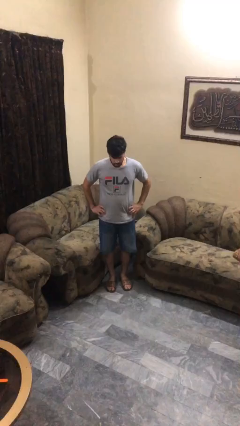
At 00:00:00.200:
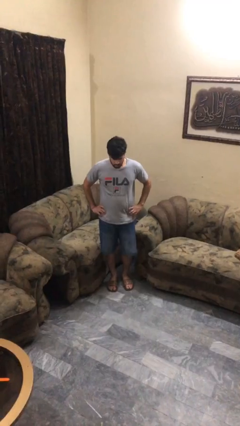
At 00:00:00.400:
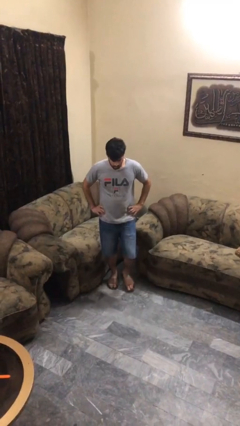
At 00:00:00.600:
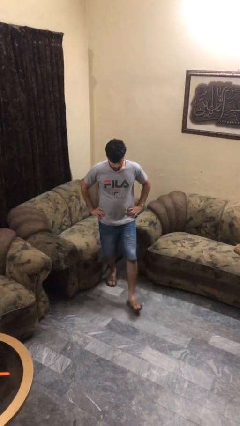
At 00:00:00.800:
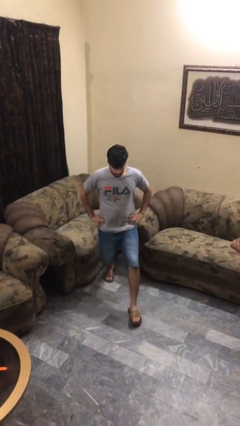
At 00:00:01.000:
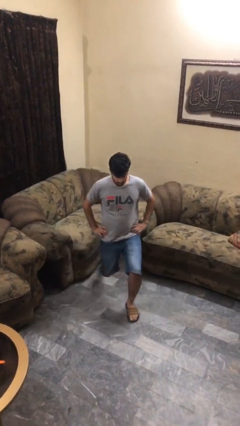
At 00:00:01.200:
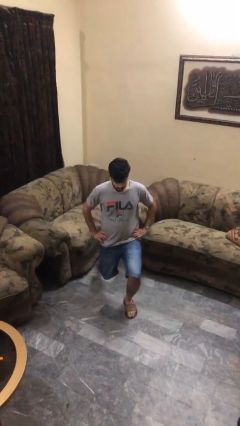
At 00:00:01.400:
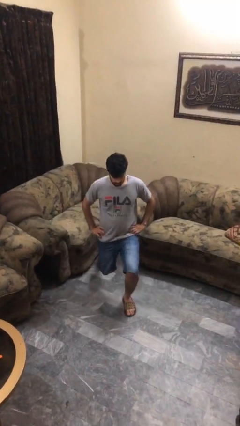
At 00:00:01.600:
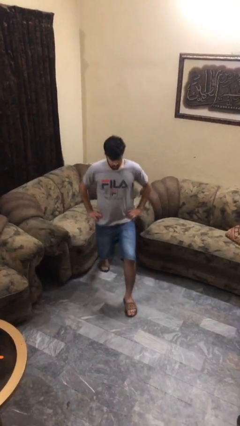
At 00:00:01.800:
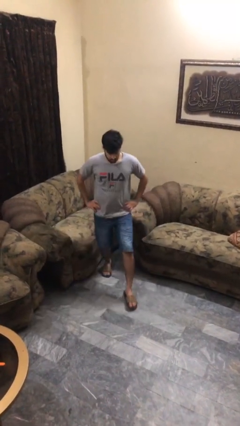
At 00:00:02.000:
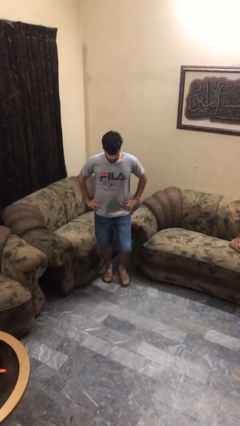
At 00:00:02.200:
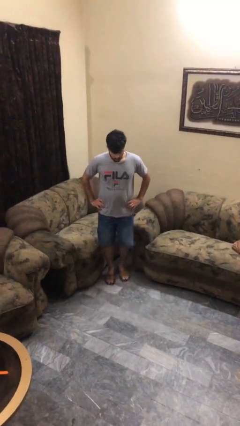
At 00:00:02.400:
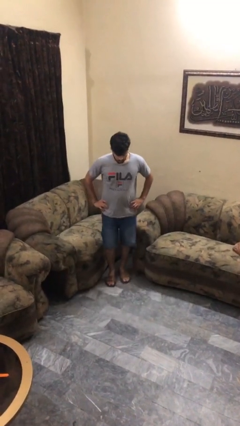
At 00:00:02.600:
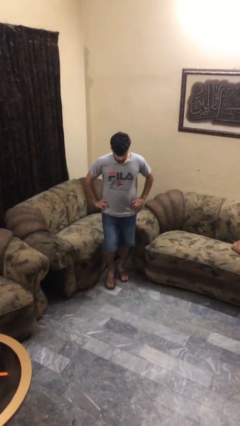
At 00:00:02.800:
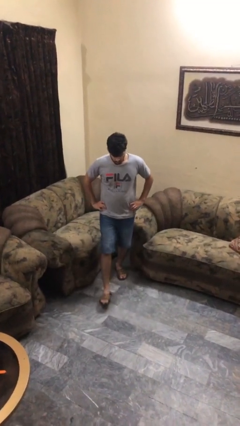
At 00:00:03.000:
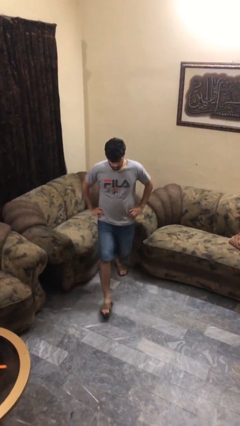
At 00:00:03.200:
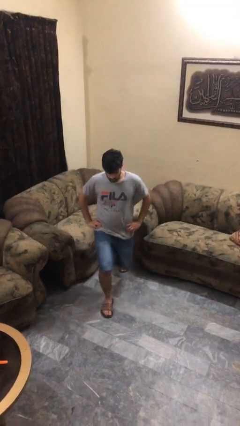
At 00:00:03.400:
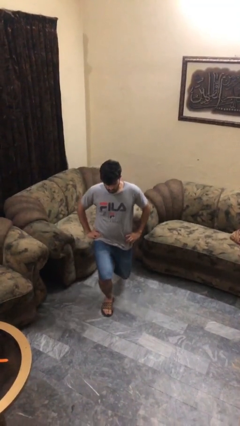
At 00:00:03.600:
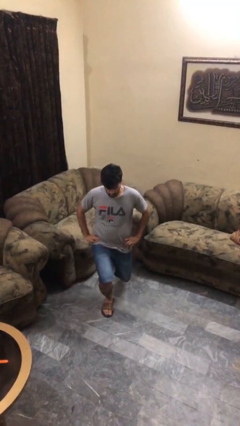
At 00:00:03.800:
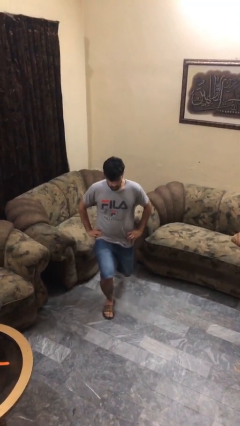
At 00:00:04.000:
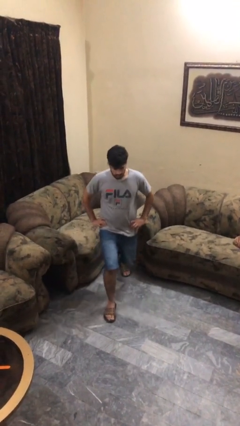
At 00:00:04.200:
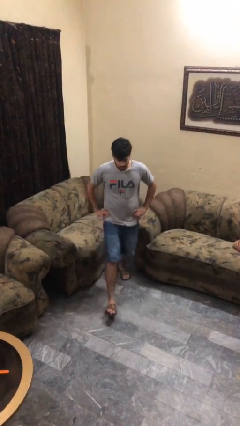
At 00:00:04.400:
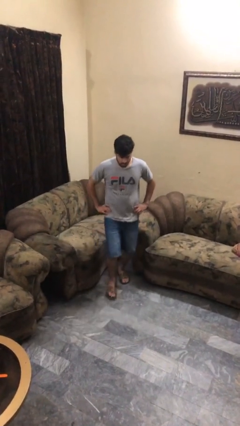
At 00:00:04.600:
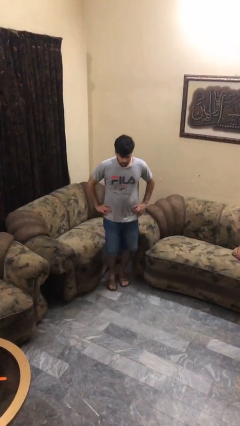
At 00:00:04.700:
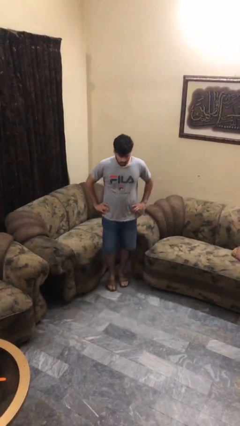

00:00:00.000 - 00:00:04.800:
person exercises with lunges

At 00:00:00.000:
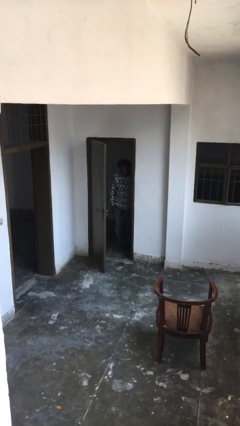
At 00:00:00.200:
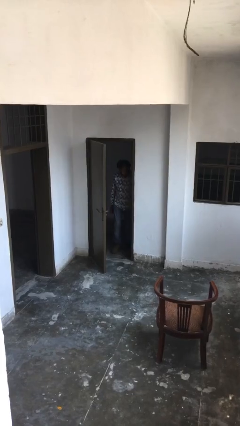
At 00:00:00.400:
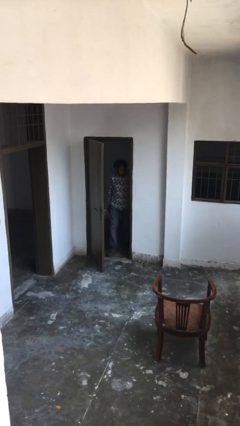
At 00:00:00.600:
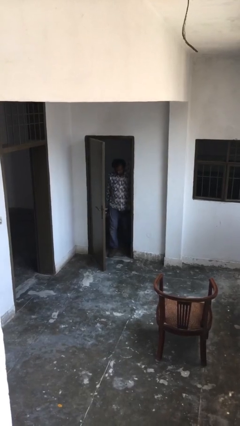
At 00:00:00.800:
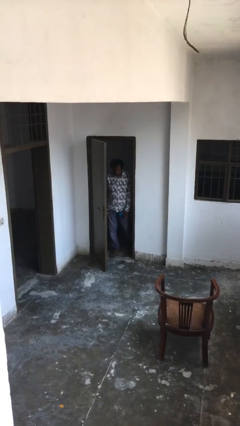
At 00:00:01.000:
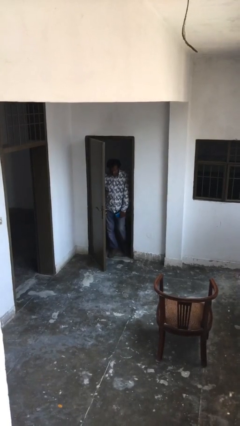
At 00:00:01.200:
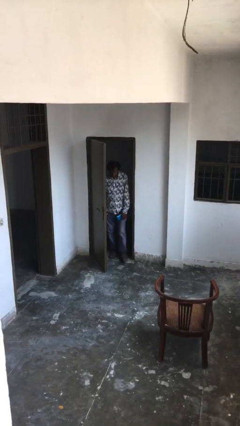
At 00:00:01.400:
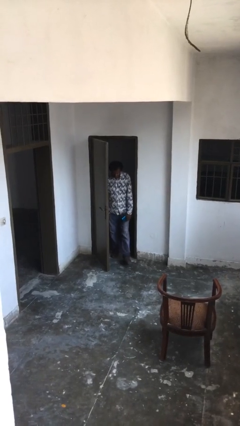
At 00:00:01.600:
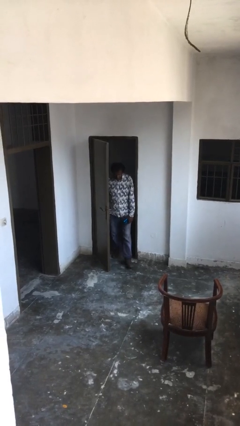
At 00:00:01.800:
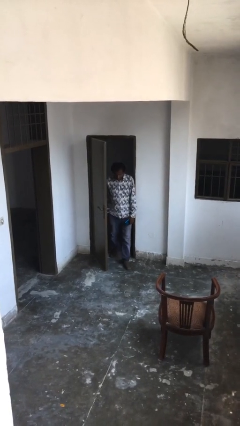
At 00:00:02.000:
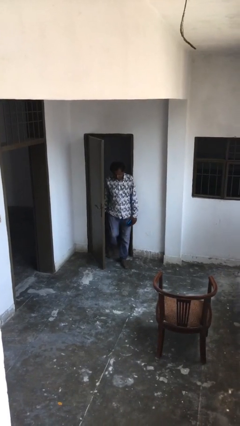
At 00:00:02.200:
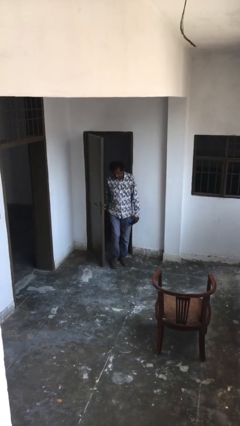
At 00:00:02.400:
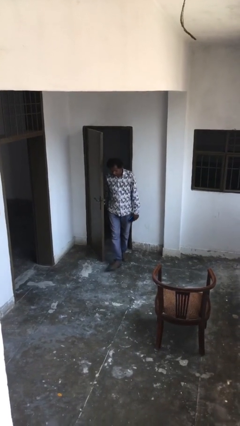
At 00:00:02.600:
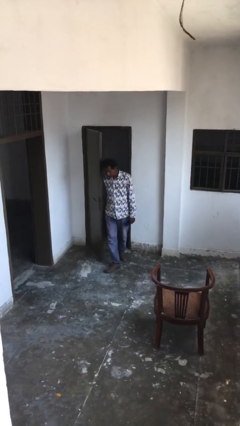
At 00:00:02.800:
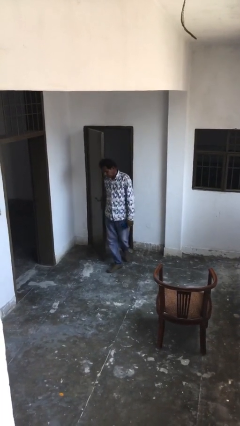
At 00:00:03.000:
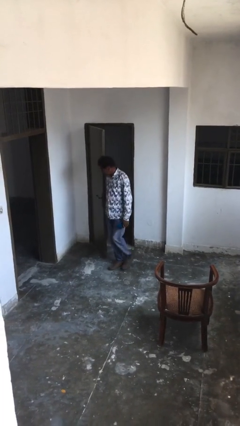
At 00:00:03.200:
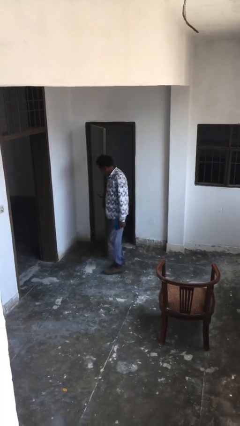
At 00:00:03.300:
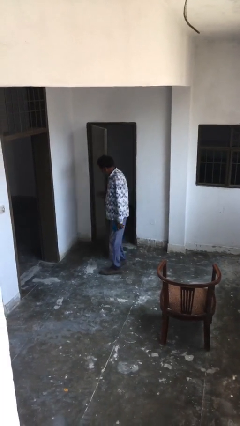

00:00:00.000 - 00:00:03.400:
person enters scene through structure

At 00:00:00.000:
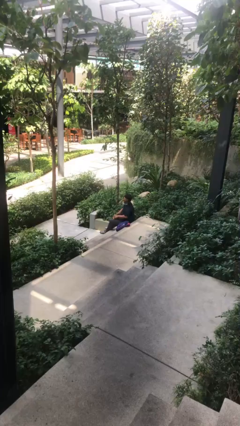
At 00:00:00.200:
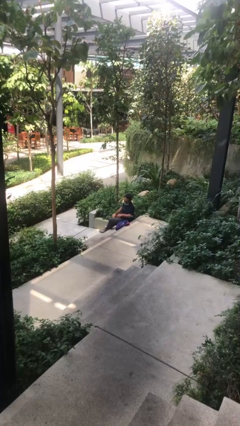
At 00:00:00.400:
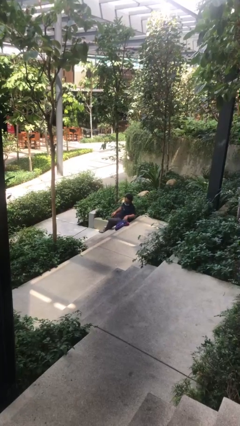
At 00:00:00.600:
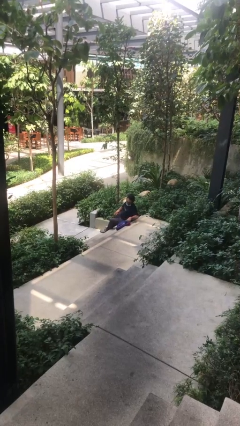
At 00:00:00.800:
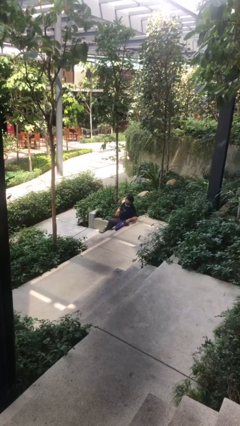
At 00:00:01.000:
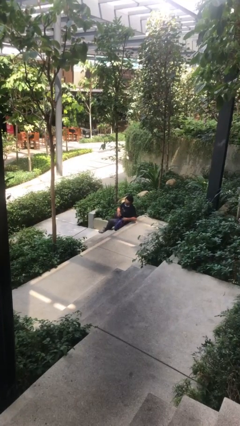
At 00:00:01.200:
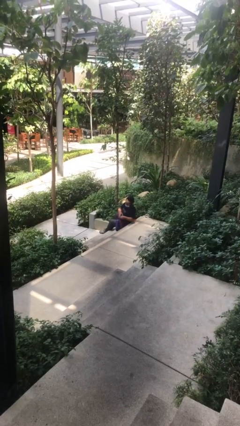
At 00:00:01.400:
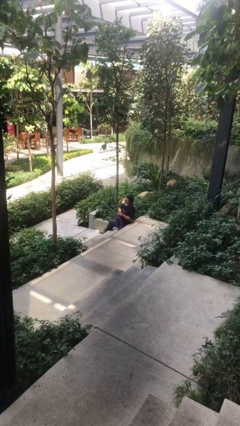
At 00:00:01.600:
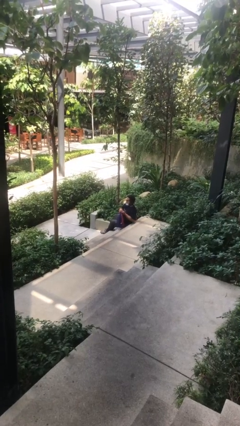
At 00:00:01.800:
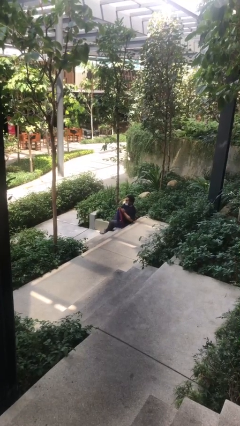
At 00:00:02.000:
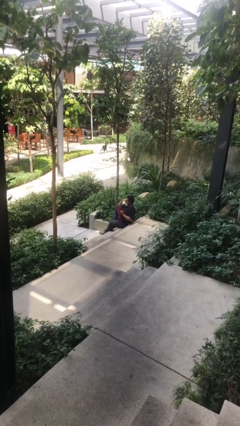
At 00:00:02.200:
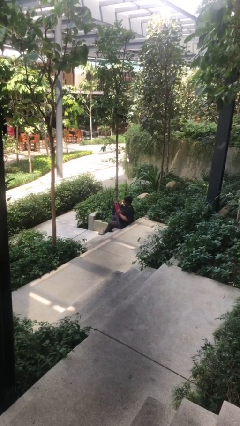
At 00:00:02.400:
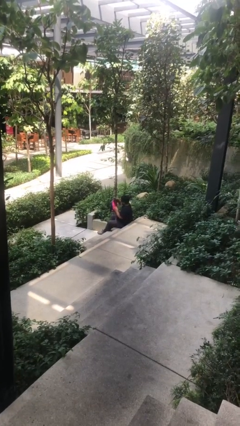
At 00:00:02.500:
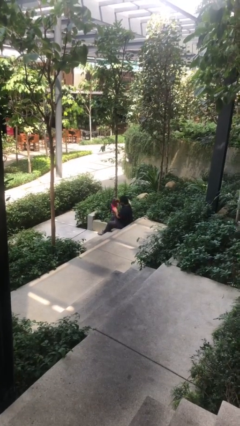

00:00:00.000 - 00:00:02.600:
person picks up object from floor

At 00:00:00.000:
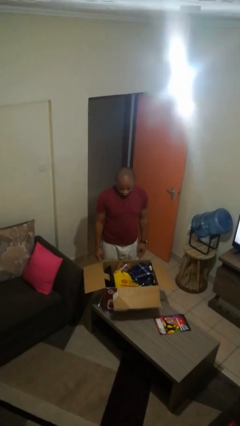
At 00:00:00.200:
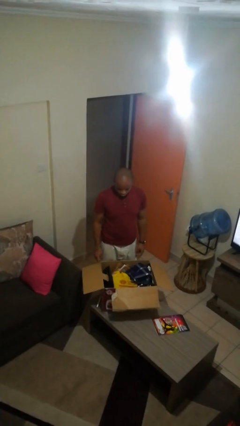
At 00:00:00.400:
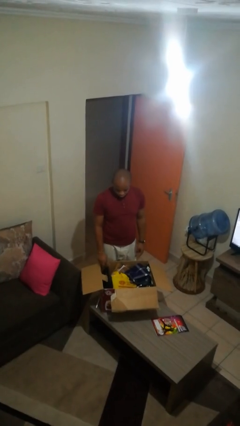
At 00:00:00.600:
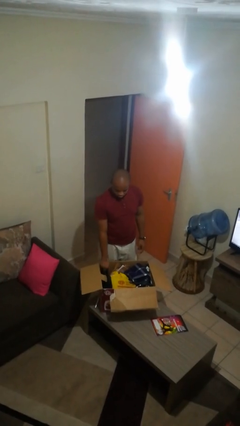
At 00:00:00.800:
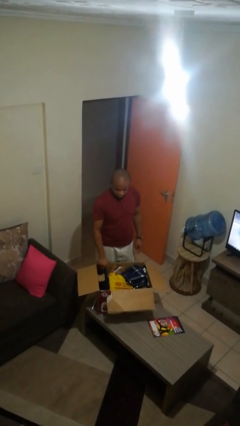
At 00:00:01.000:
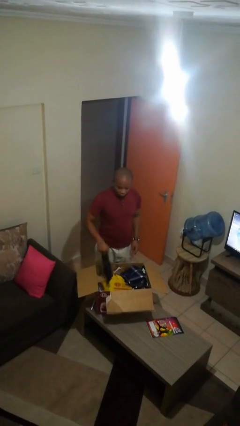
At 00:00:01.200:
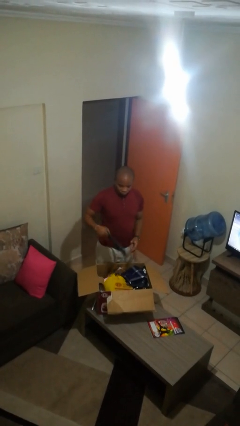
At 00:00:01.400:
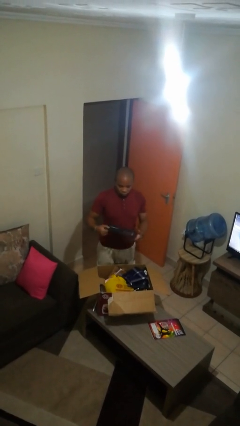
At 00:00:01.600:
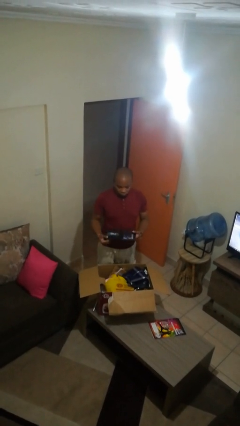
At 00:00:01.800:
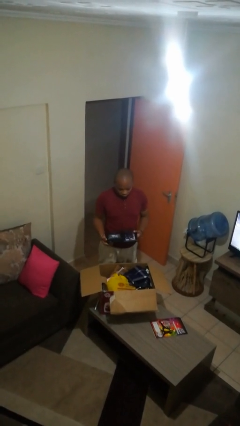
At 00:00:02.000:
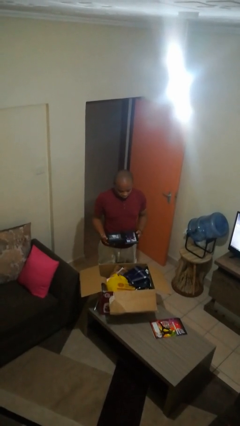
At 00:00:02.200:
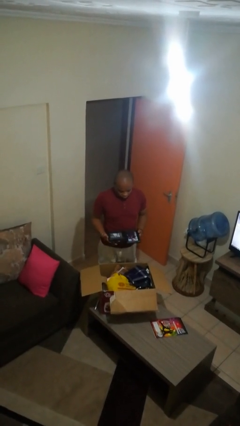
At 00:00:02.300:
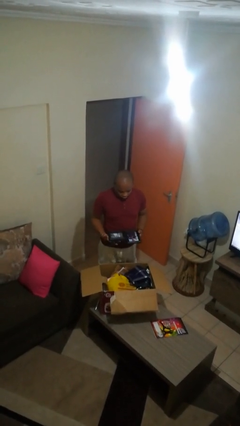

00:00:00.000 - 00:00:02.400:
person takes object from box

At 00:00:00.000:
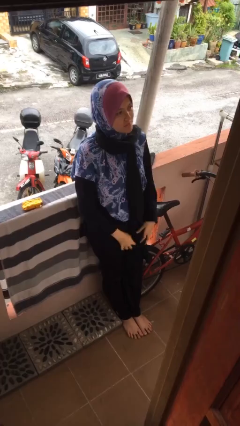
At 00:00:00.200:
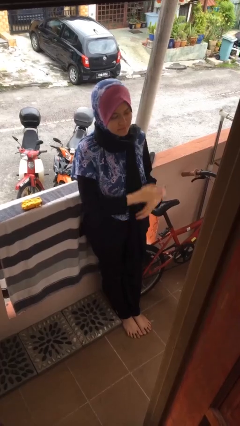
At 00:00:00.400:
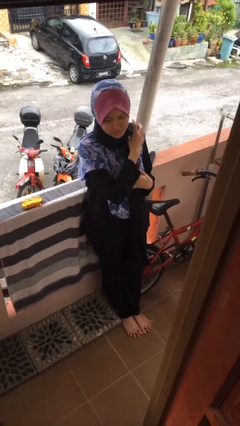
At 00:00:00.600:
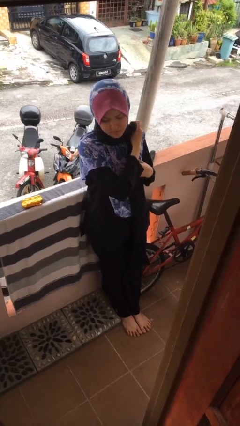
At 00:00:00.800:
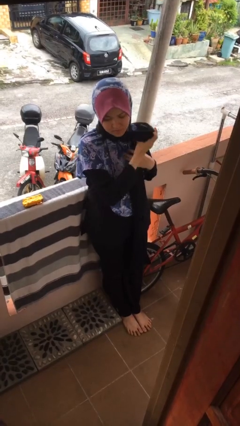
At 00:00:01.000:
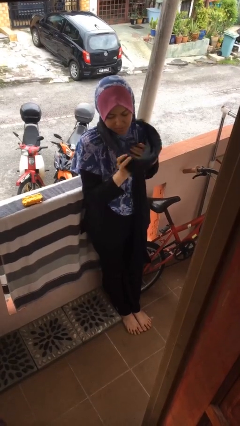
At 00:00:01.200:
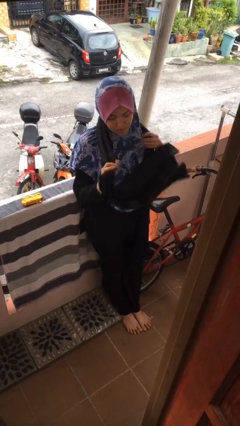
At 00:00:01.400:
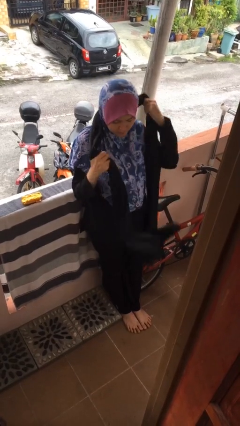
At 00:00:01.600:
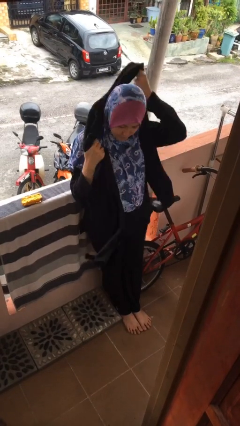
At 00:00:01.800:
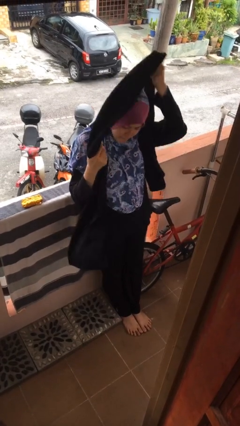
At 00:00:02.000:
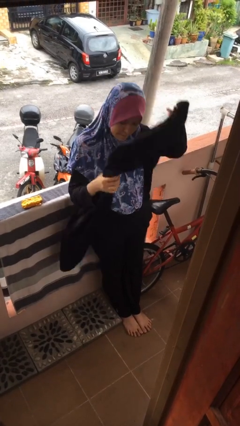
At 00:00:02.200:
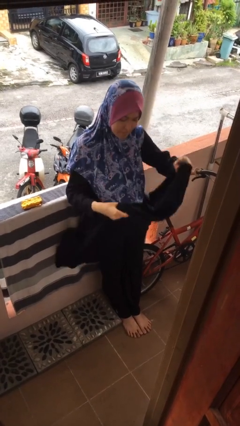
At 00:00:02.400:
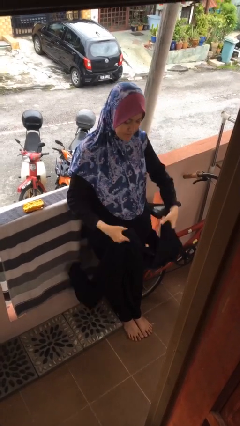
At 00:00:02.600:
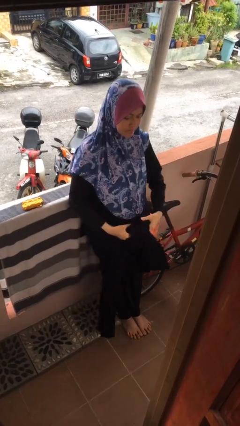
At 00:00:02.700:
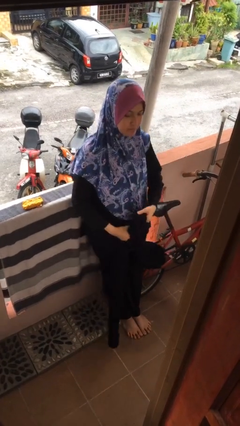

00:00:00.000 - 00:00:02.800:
person takes off scarf

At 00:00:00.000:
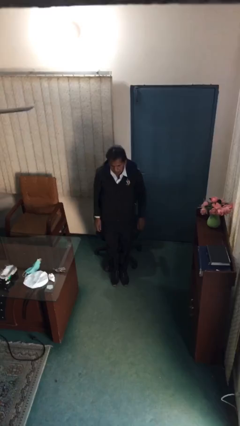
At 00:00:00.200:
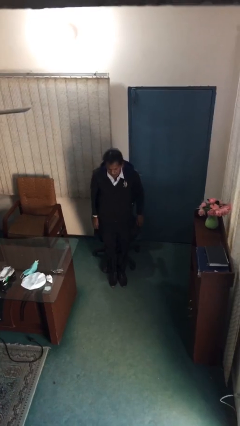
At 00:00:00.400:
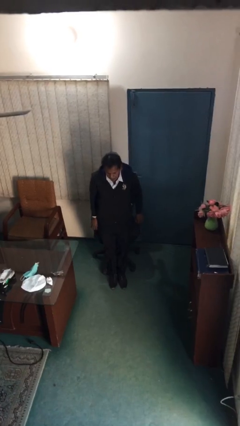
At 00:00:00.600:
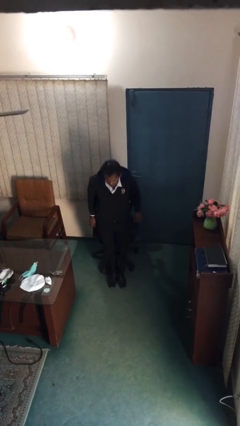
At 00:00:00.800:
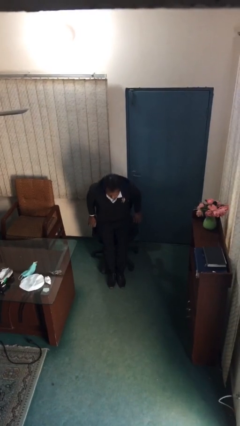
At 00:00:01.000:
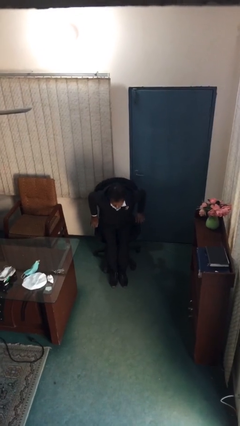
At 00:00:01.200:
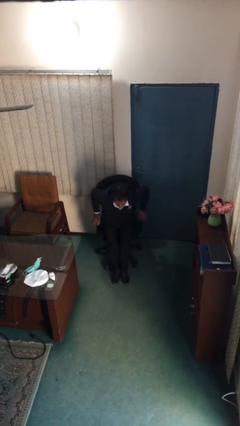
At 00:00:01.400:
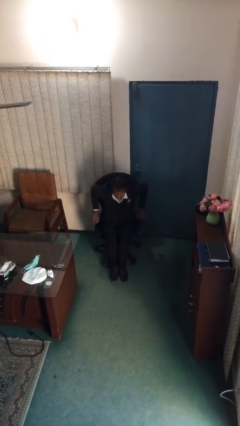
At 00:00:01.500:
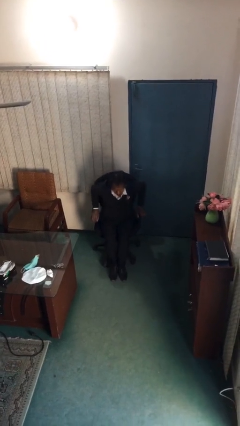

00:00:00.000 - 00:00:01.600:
person sits down
